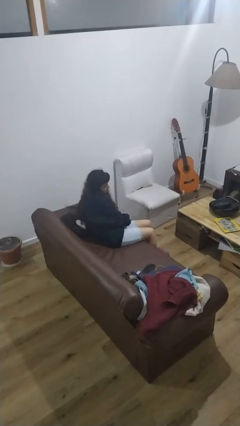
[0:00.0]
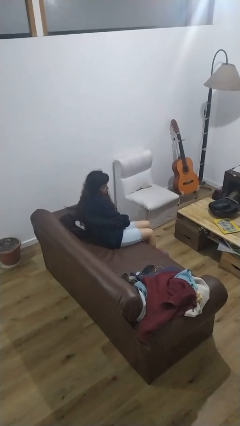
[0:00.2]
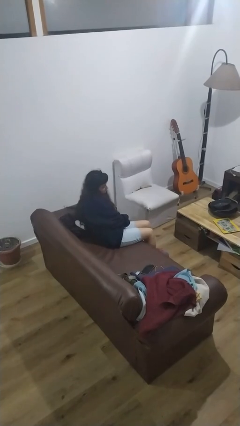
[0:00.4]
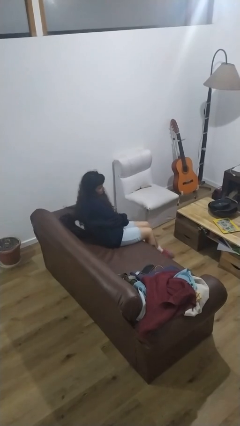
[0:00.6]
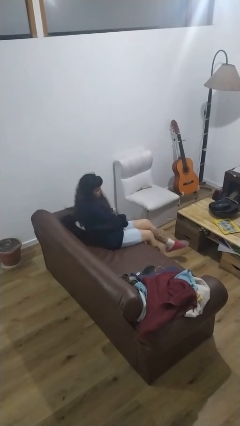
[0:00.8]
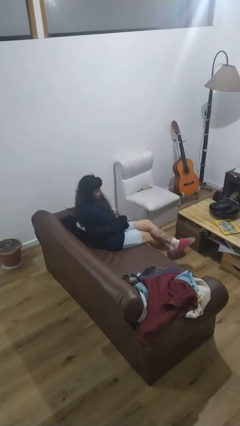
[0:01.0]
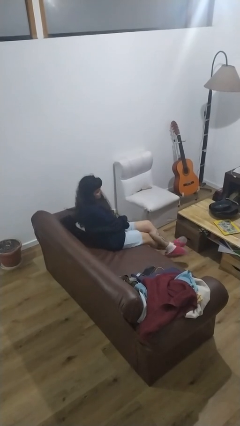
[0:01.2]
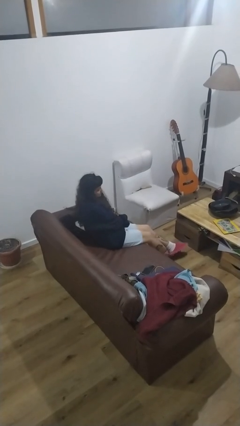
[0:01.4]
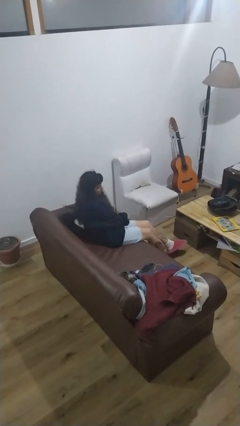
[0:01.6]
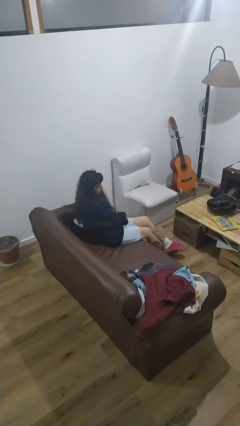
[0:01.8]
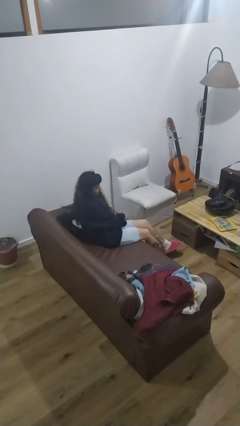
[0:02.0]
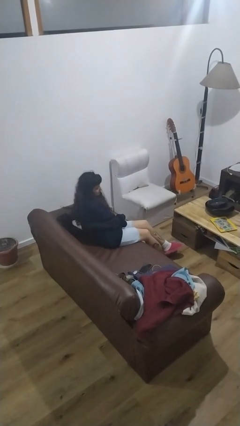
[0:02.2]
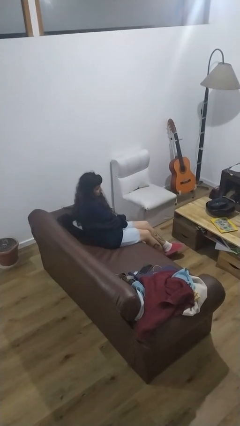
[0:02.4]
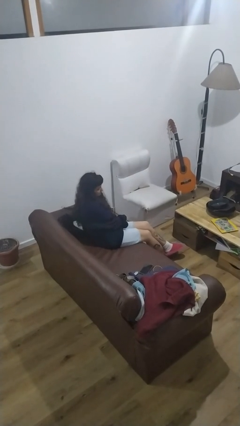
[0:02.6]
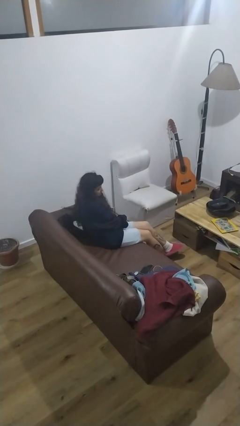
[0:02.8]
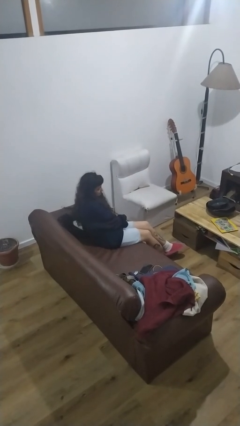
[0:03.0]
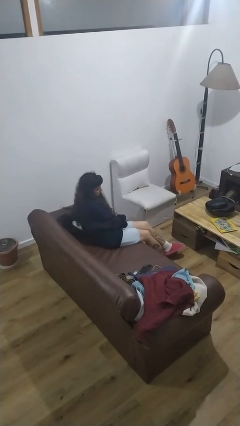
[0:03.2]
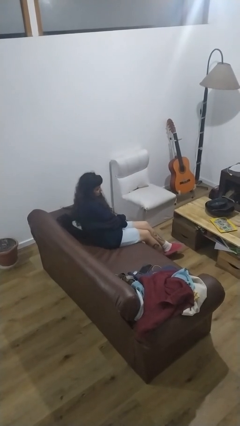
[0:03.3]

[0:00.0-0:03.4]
person crosses legs

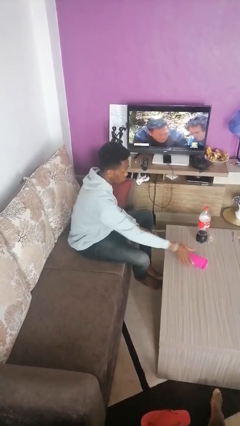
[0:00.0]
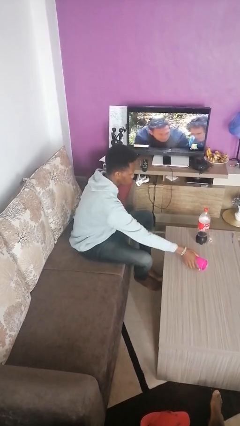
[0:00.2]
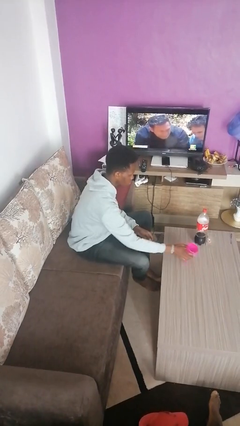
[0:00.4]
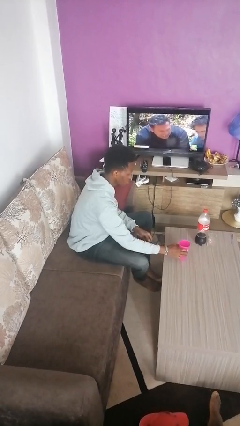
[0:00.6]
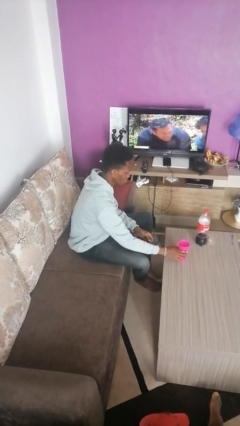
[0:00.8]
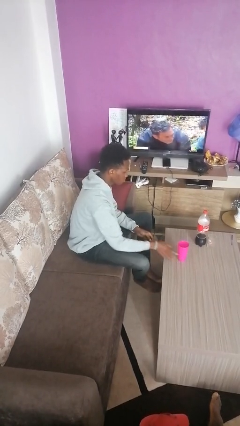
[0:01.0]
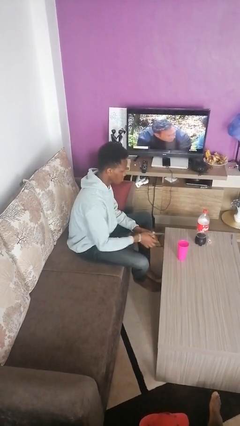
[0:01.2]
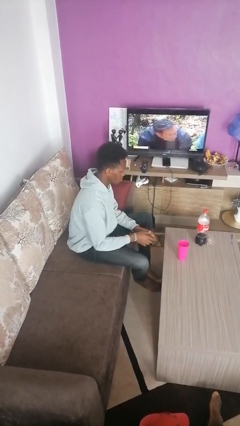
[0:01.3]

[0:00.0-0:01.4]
person sets upright glass

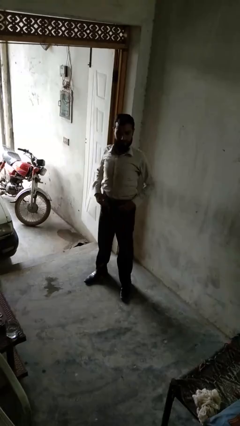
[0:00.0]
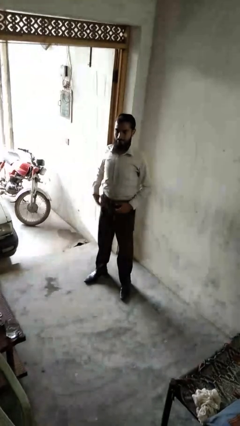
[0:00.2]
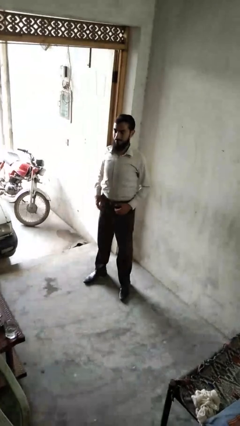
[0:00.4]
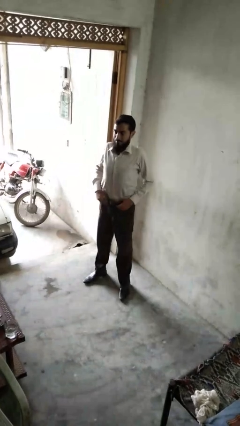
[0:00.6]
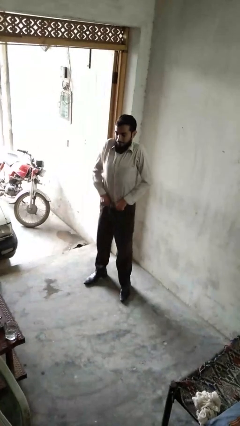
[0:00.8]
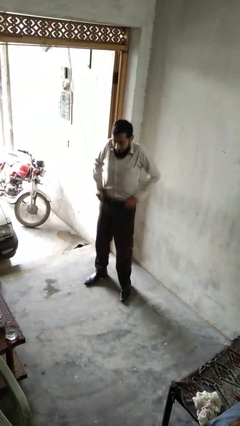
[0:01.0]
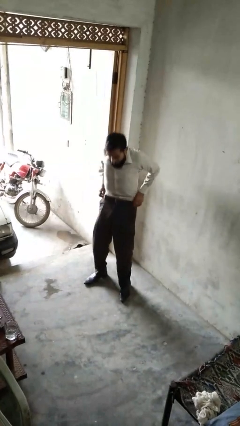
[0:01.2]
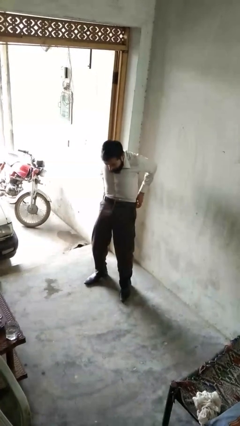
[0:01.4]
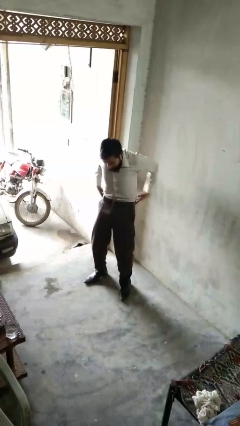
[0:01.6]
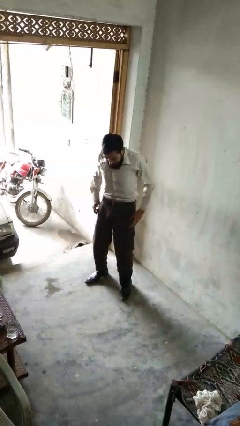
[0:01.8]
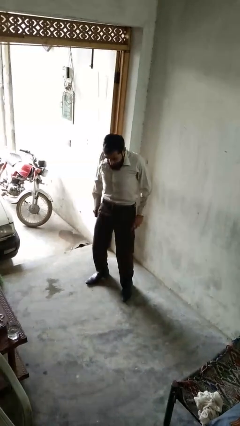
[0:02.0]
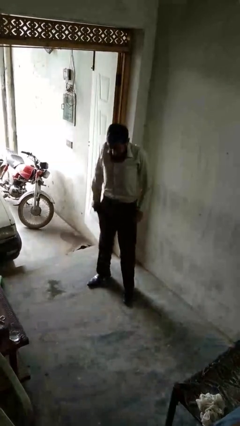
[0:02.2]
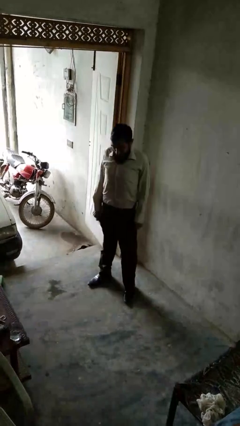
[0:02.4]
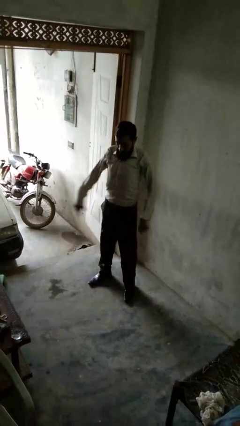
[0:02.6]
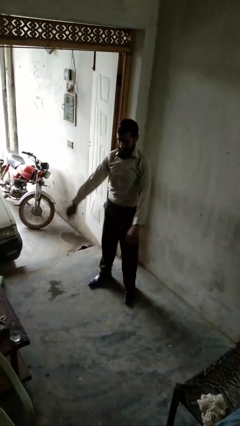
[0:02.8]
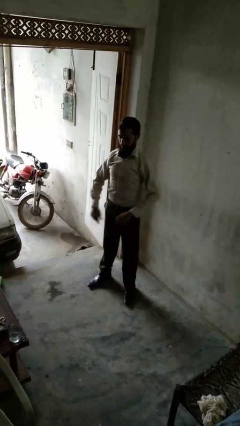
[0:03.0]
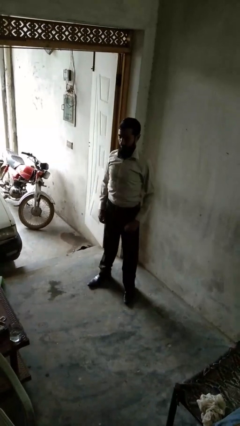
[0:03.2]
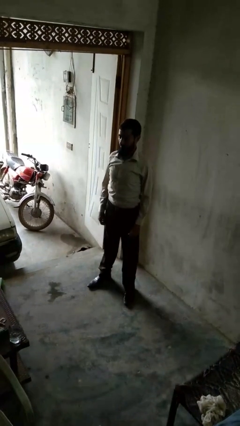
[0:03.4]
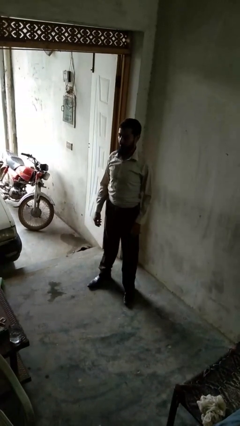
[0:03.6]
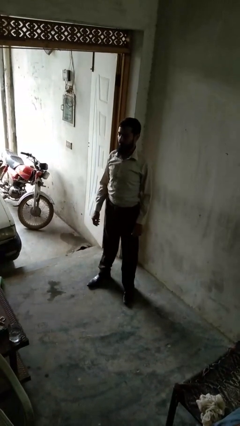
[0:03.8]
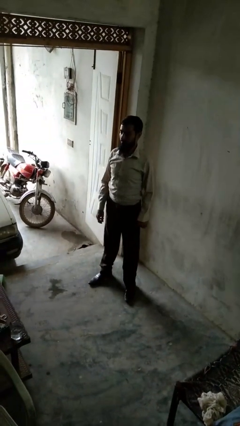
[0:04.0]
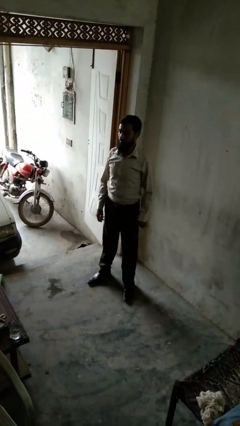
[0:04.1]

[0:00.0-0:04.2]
person hikes up pants

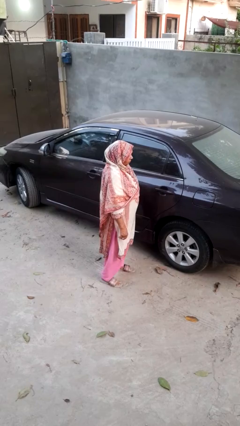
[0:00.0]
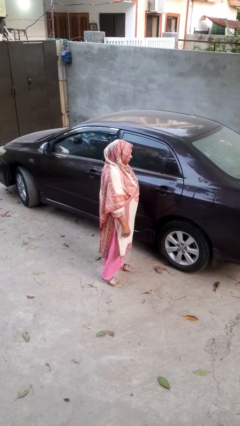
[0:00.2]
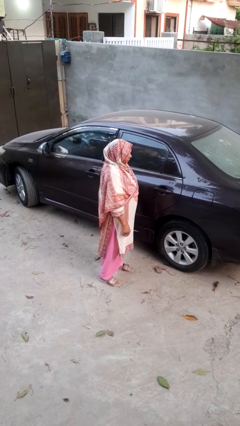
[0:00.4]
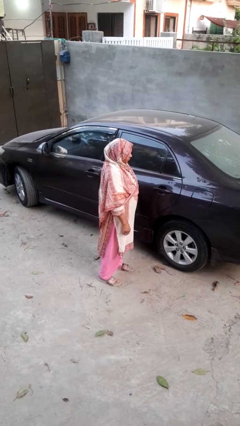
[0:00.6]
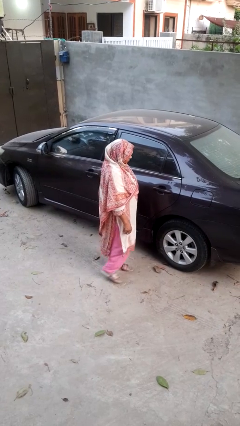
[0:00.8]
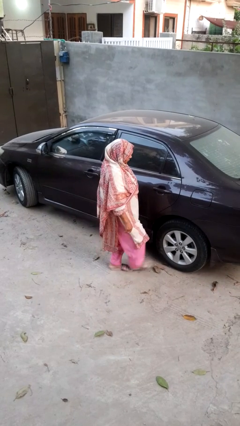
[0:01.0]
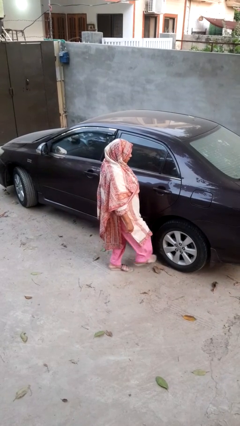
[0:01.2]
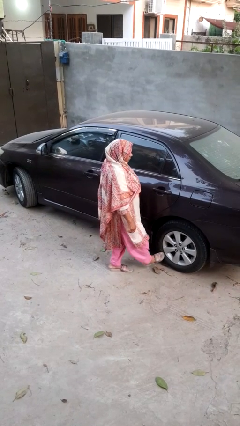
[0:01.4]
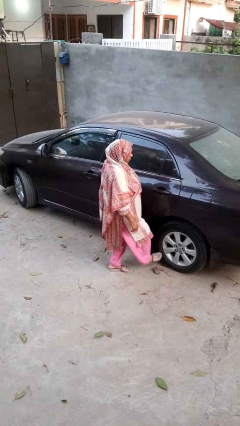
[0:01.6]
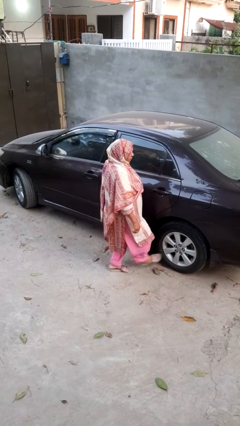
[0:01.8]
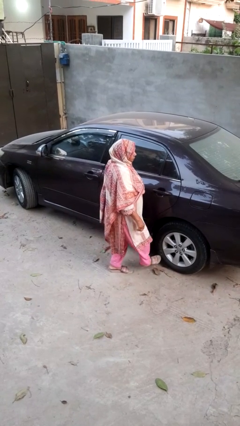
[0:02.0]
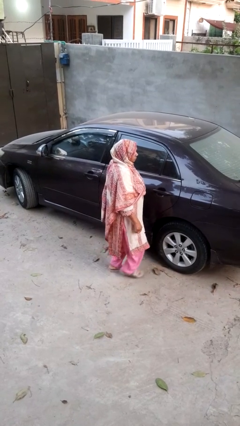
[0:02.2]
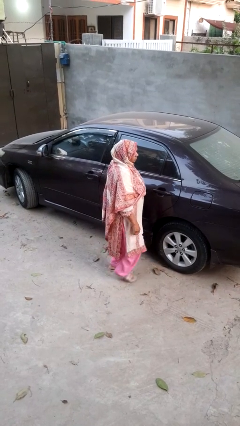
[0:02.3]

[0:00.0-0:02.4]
person kicks car tires

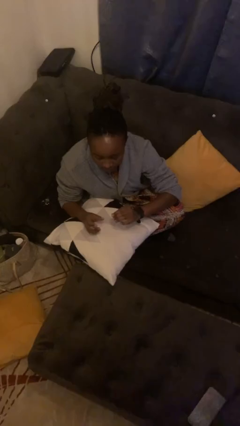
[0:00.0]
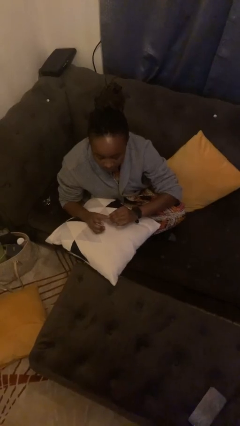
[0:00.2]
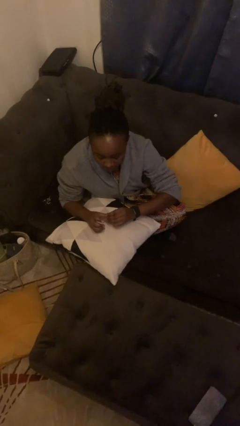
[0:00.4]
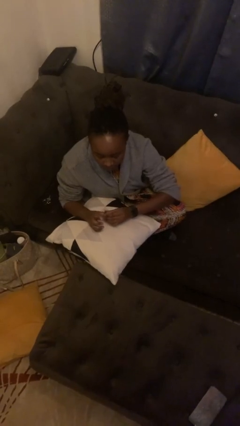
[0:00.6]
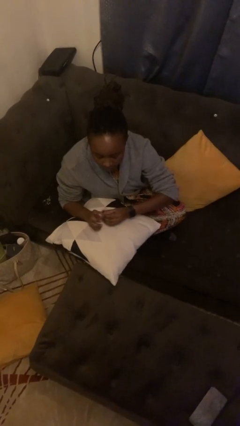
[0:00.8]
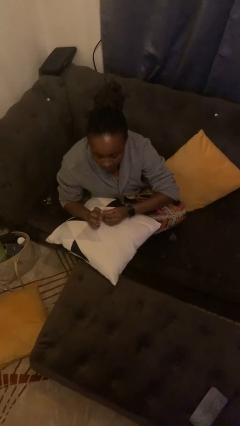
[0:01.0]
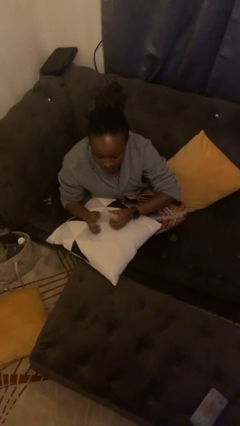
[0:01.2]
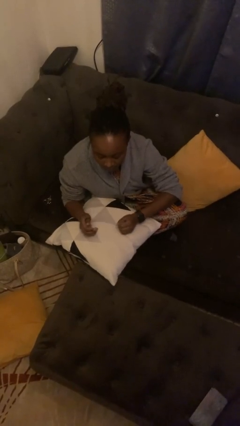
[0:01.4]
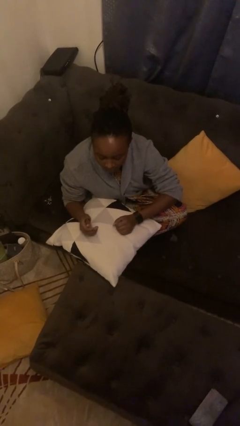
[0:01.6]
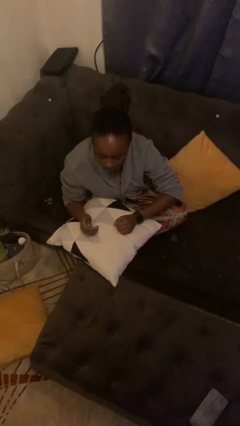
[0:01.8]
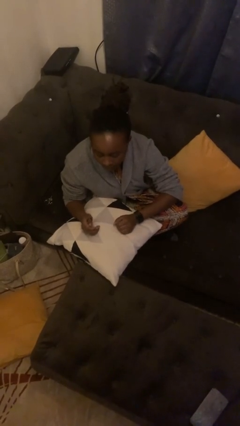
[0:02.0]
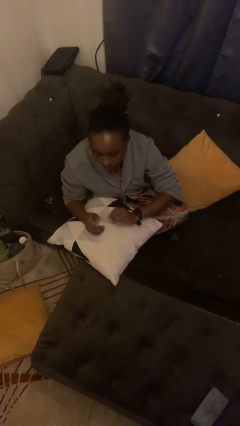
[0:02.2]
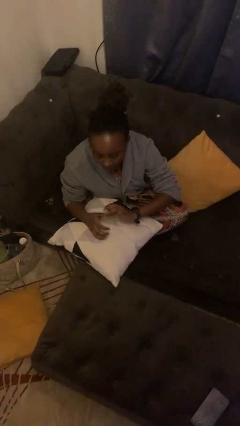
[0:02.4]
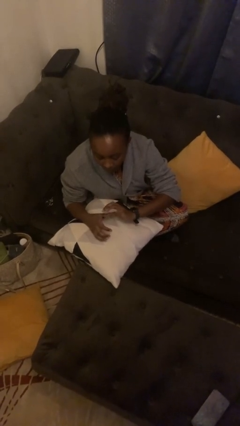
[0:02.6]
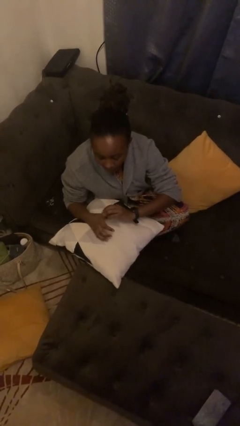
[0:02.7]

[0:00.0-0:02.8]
person puts on ring

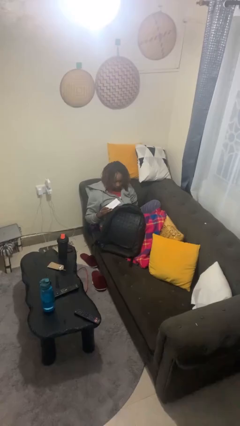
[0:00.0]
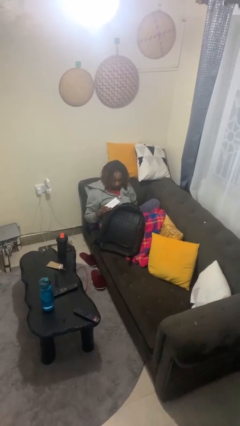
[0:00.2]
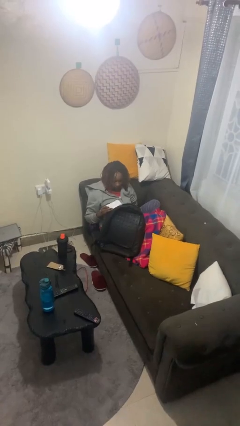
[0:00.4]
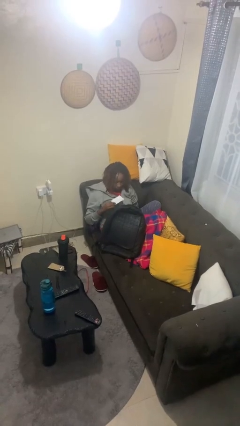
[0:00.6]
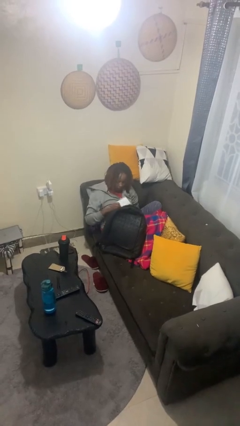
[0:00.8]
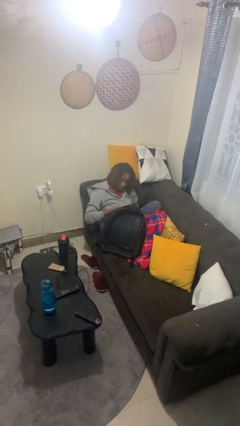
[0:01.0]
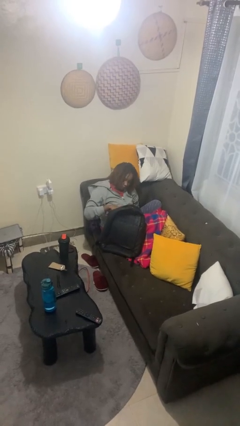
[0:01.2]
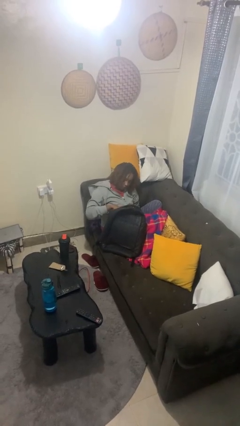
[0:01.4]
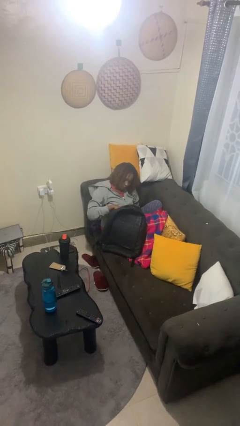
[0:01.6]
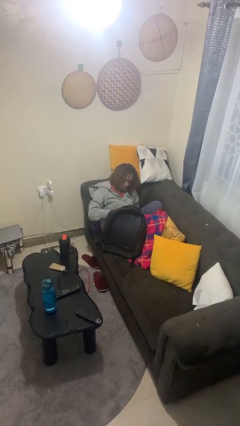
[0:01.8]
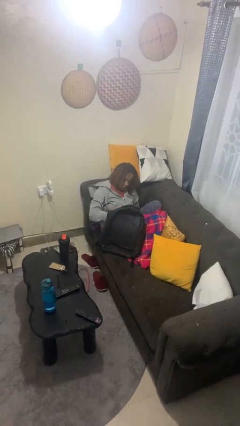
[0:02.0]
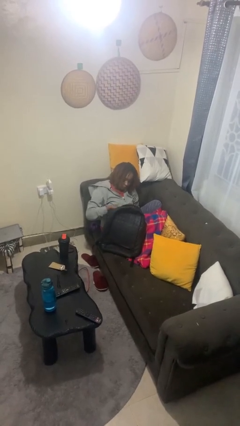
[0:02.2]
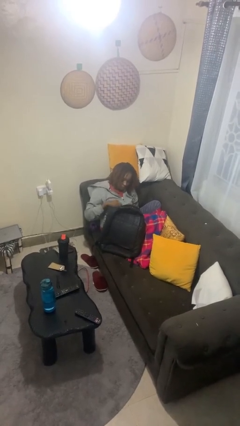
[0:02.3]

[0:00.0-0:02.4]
person puts object into backpack

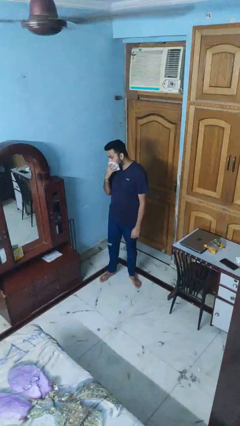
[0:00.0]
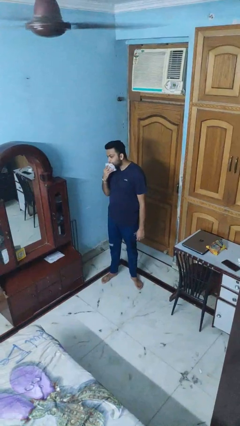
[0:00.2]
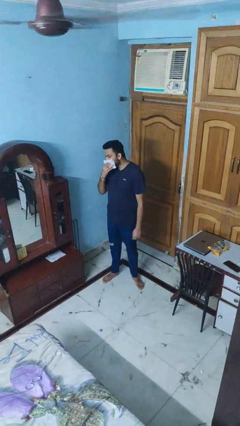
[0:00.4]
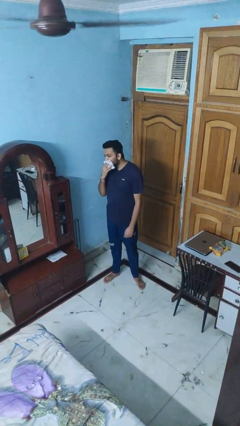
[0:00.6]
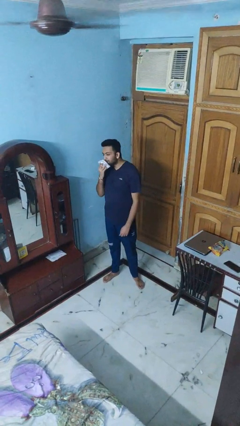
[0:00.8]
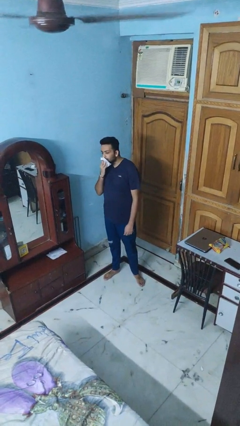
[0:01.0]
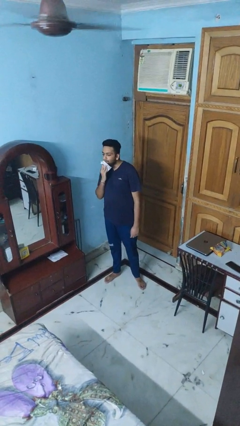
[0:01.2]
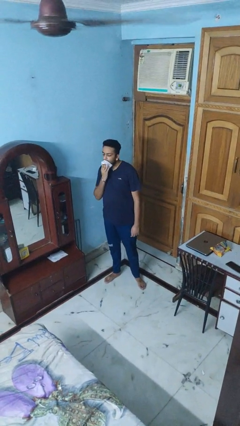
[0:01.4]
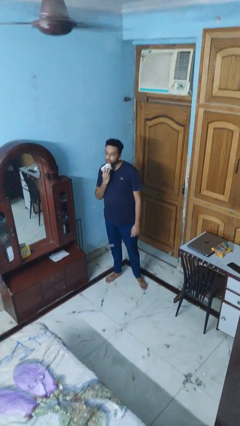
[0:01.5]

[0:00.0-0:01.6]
person wipes mouth with napkin
